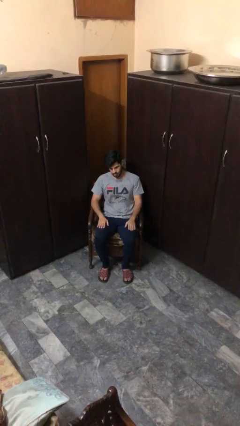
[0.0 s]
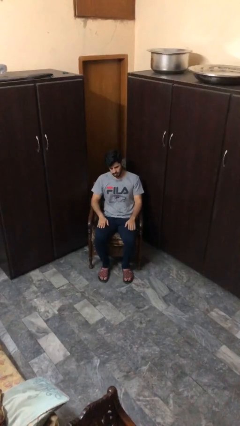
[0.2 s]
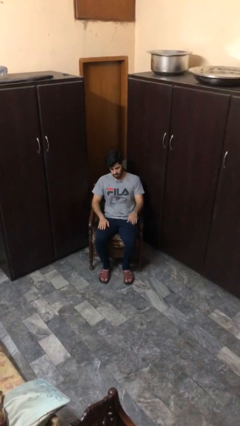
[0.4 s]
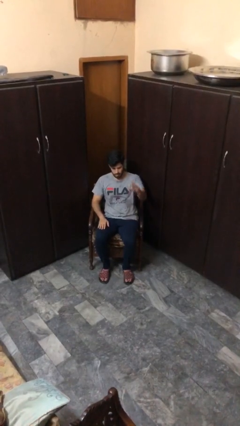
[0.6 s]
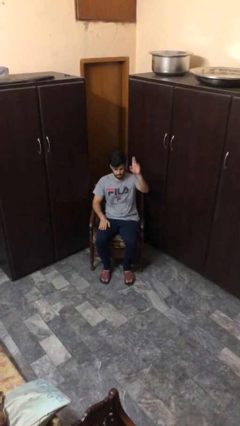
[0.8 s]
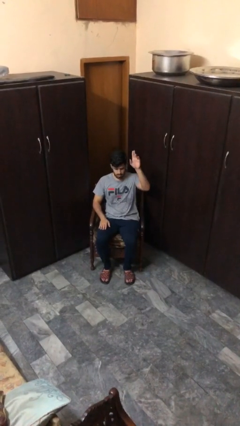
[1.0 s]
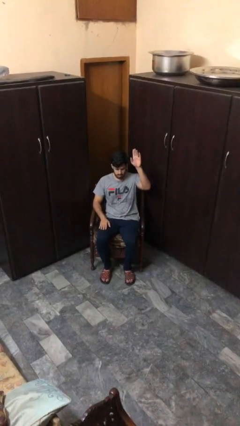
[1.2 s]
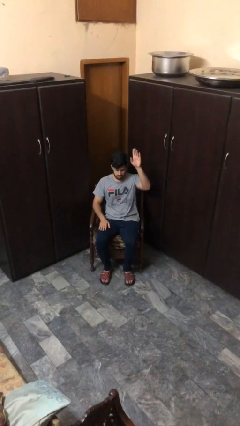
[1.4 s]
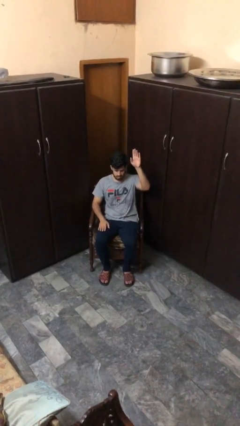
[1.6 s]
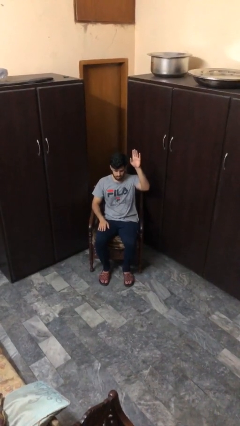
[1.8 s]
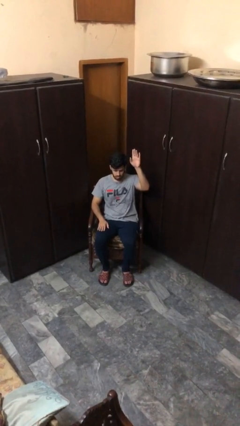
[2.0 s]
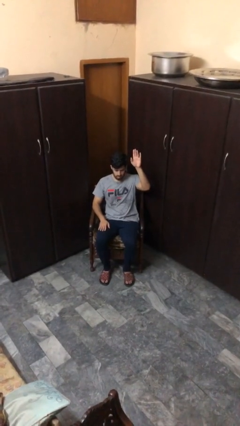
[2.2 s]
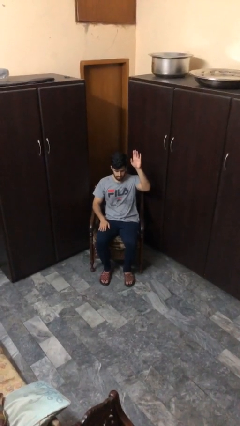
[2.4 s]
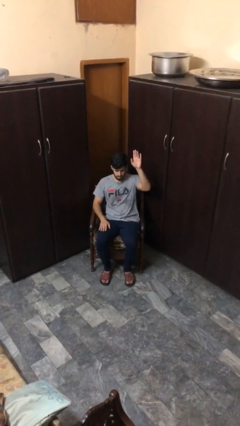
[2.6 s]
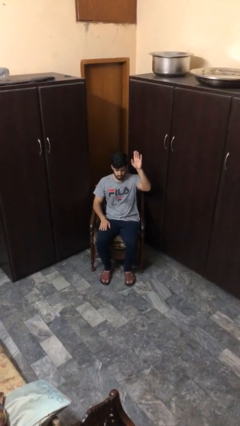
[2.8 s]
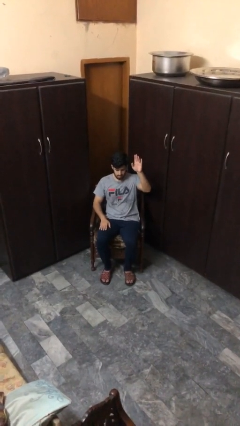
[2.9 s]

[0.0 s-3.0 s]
person gestures raise hand

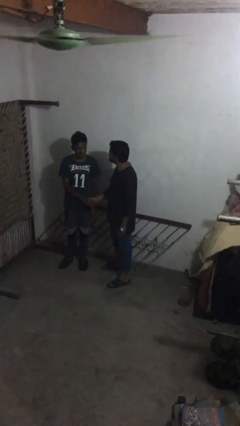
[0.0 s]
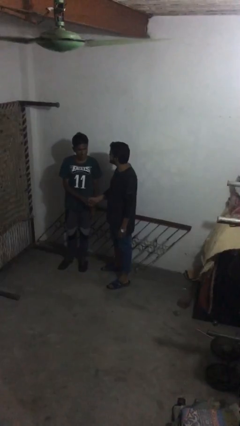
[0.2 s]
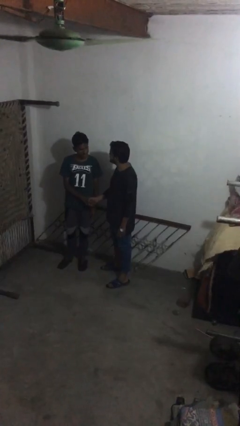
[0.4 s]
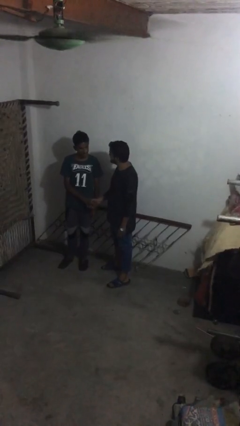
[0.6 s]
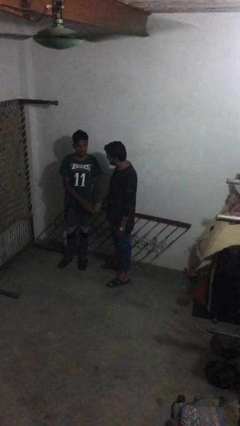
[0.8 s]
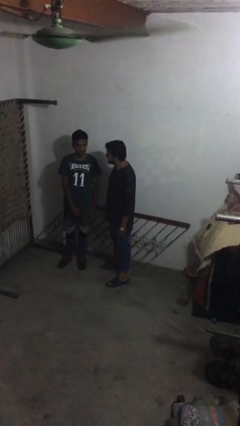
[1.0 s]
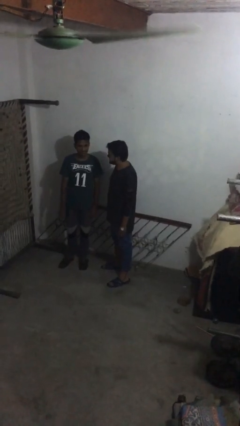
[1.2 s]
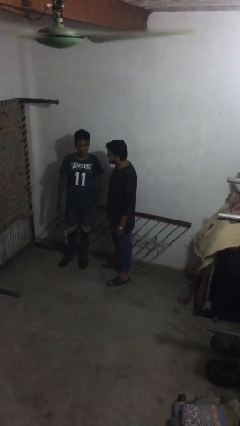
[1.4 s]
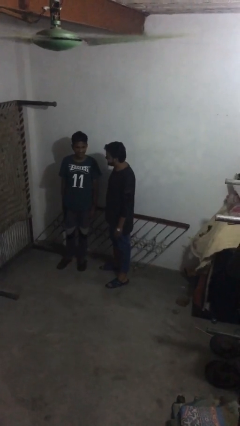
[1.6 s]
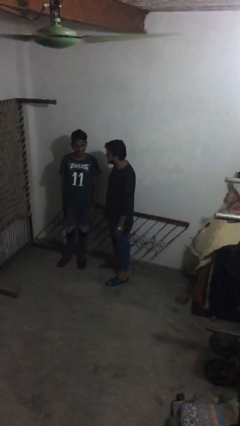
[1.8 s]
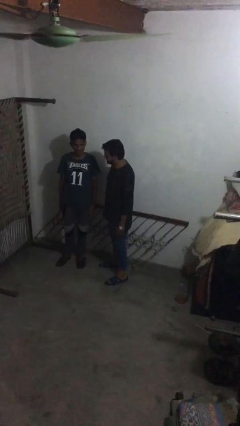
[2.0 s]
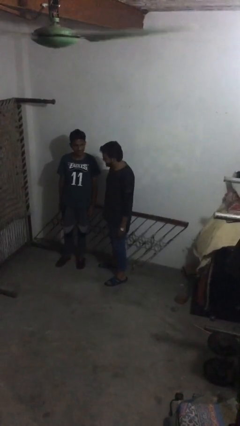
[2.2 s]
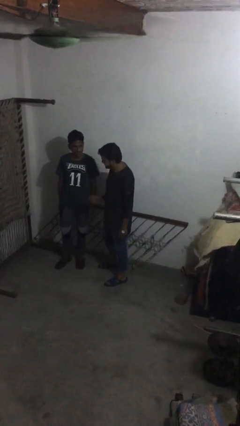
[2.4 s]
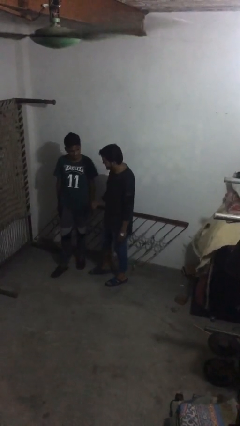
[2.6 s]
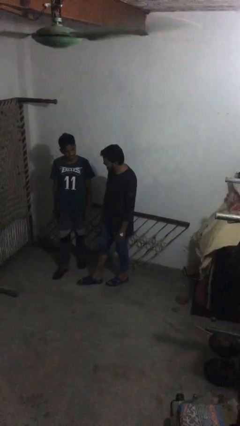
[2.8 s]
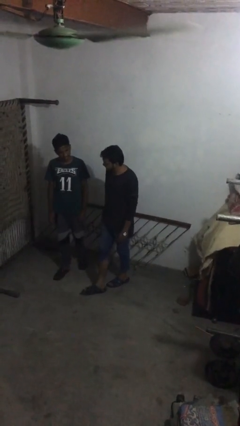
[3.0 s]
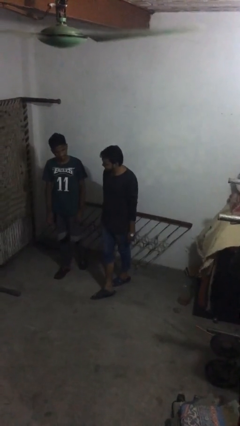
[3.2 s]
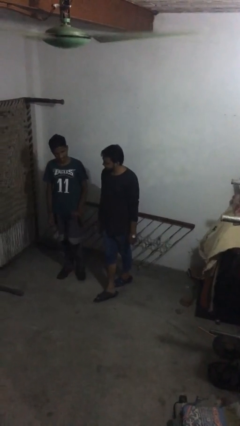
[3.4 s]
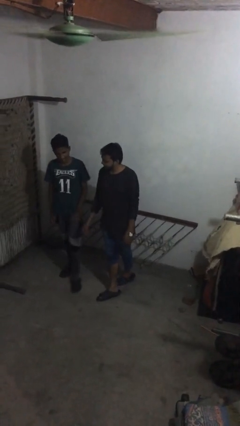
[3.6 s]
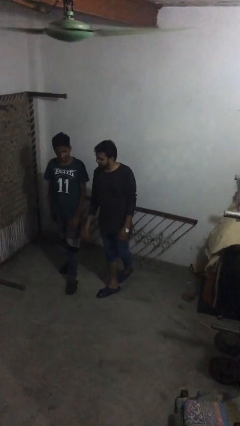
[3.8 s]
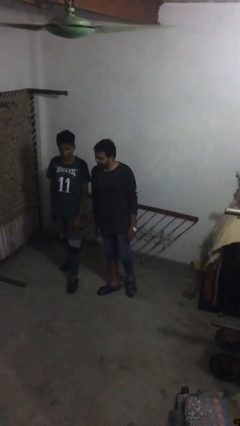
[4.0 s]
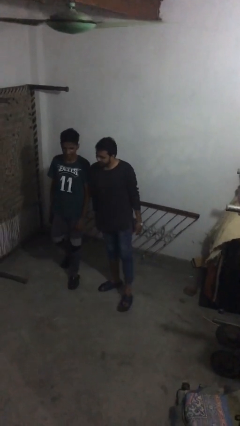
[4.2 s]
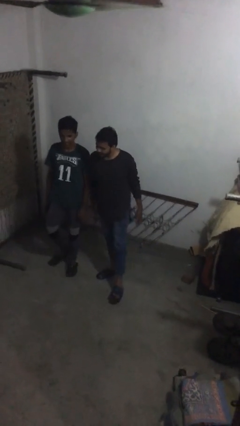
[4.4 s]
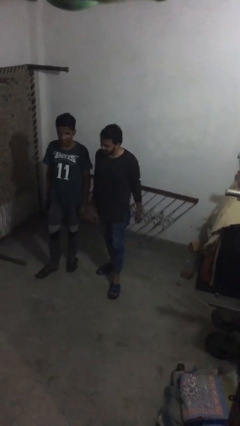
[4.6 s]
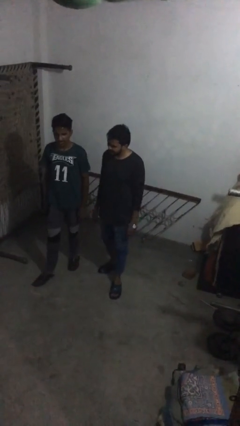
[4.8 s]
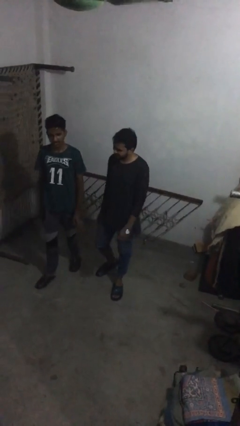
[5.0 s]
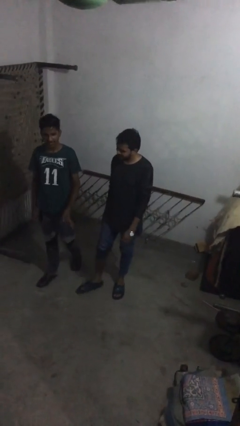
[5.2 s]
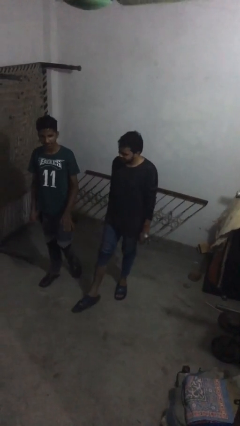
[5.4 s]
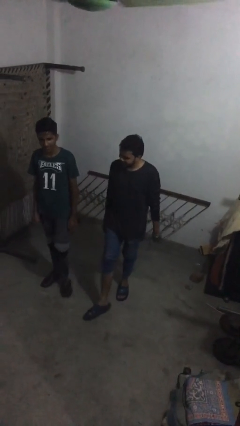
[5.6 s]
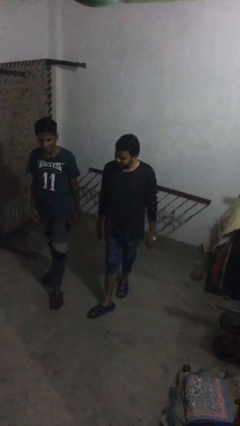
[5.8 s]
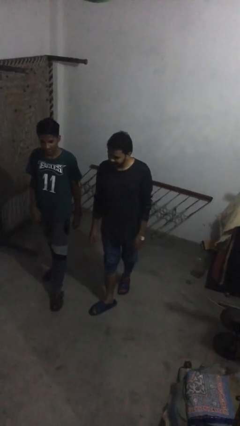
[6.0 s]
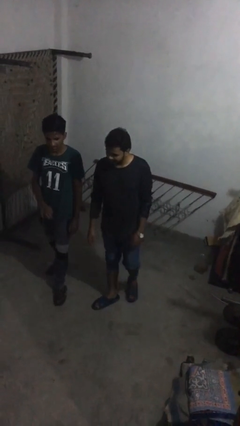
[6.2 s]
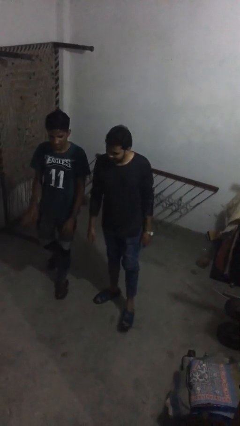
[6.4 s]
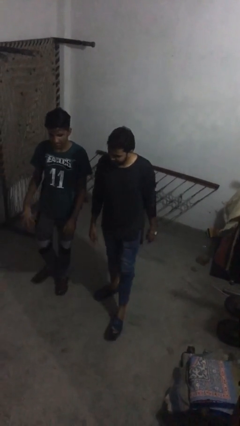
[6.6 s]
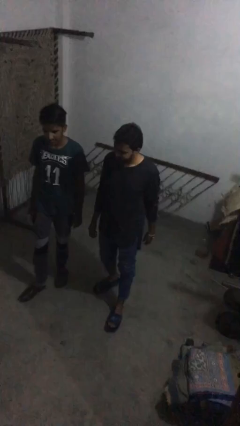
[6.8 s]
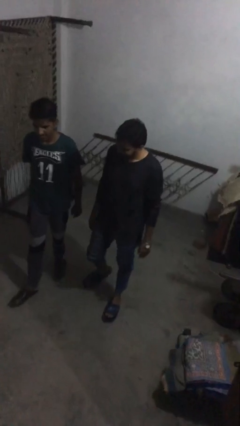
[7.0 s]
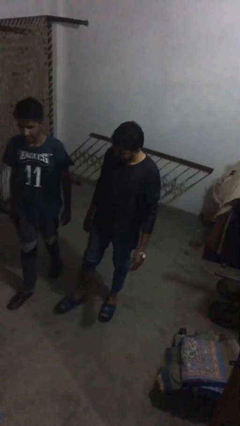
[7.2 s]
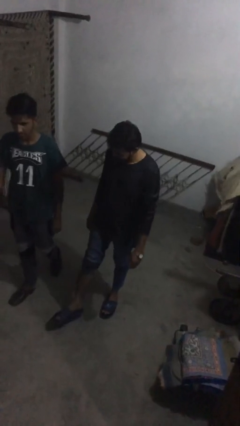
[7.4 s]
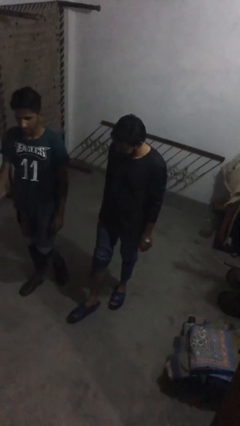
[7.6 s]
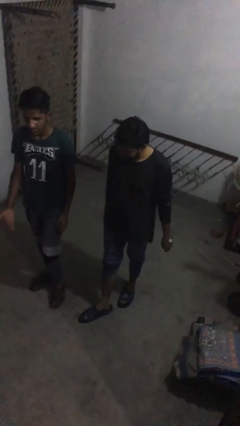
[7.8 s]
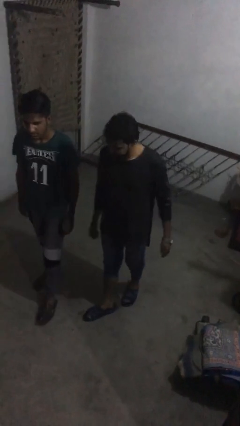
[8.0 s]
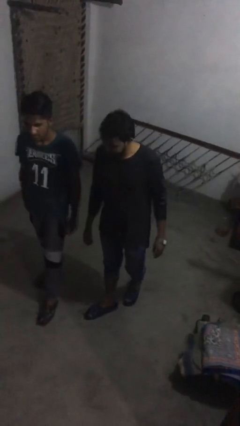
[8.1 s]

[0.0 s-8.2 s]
person talks to person

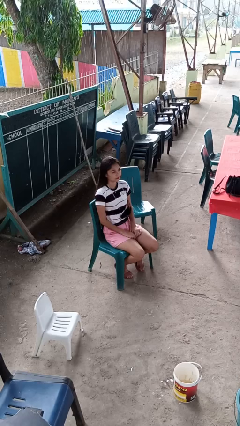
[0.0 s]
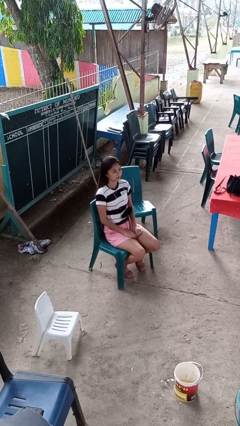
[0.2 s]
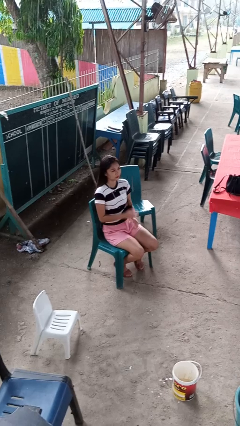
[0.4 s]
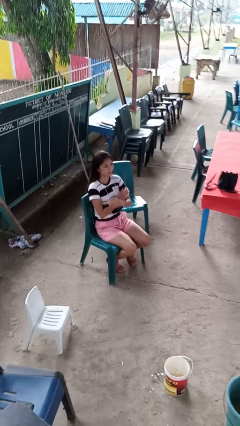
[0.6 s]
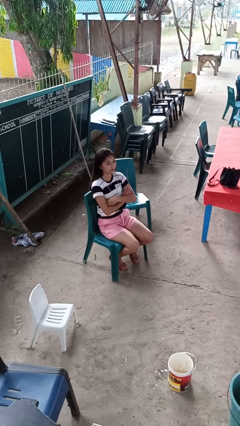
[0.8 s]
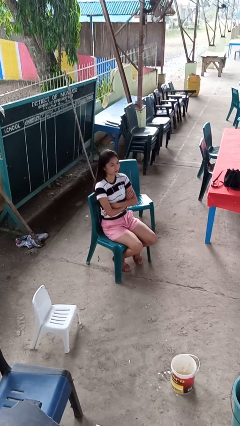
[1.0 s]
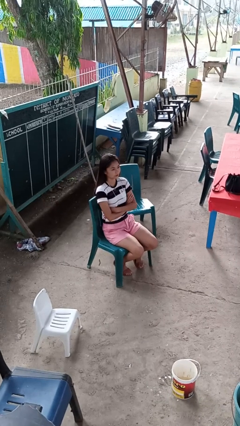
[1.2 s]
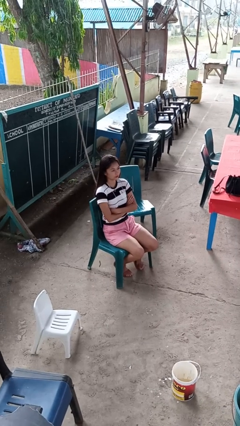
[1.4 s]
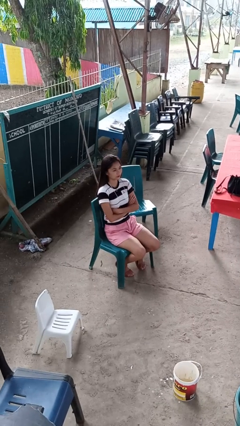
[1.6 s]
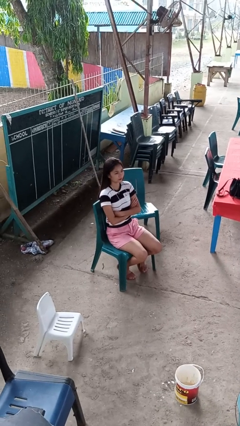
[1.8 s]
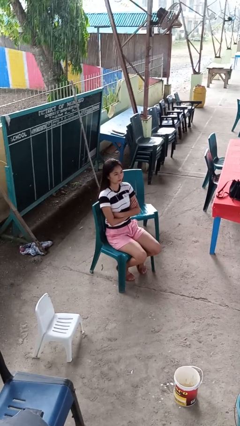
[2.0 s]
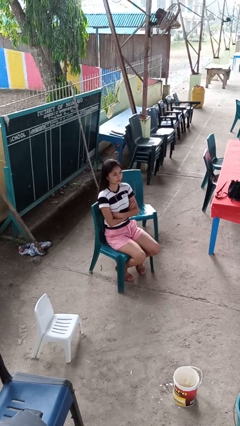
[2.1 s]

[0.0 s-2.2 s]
person gestures arms x

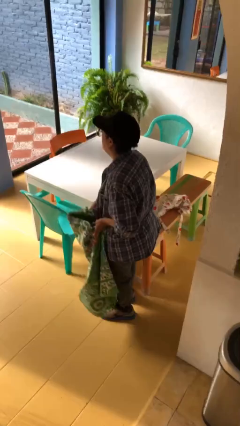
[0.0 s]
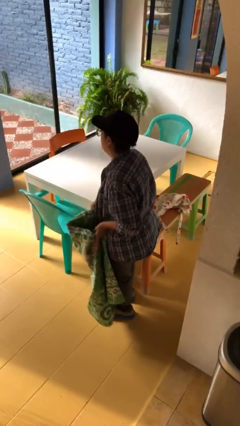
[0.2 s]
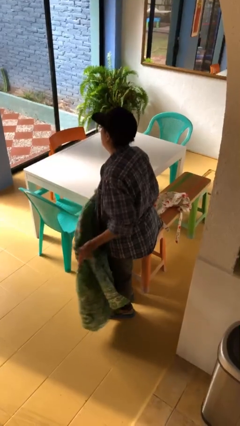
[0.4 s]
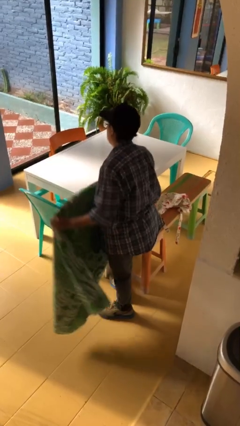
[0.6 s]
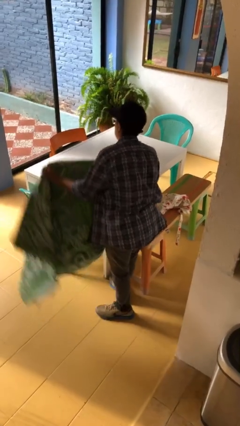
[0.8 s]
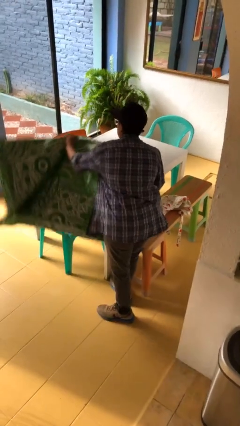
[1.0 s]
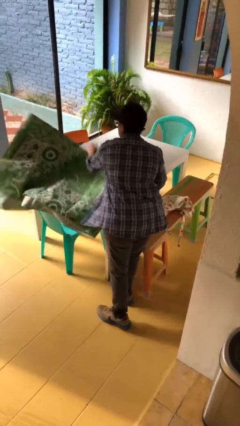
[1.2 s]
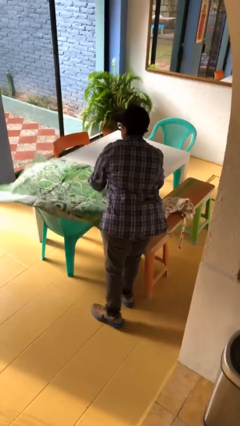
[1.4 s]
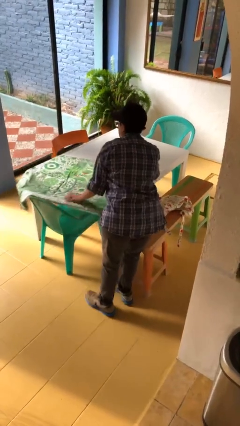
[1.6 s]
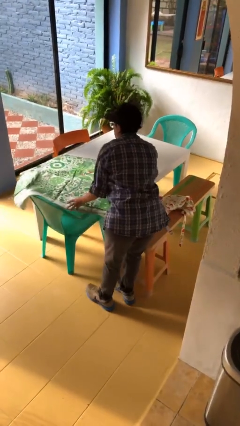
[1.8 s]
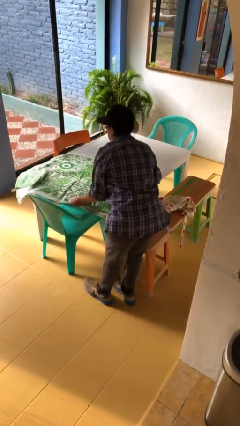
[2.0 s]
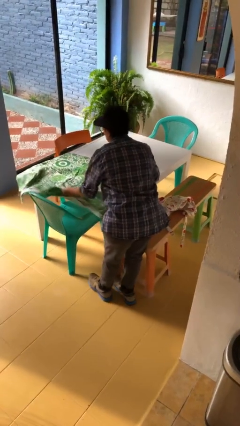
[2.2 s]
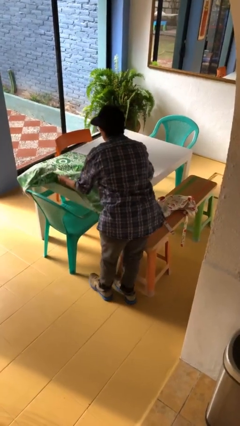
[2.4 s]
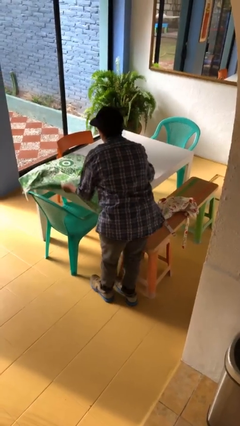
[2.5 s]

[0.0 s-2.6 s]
person spreads tablecloth

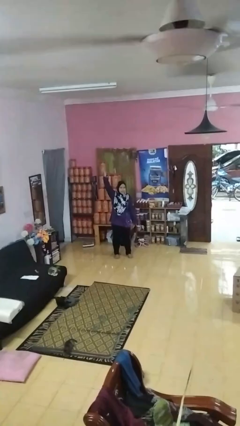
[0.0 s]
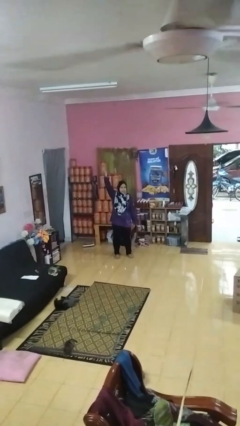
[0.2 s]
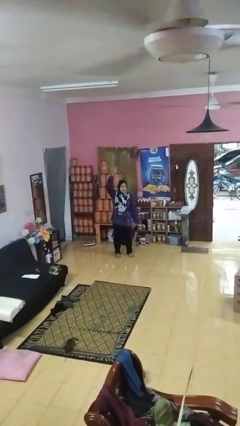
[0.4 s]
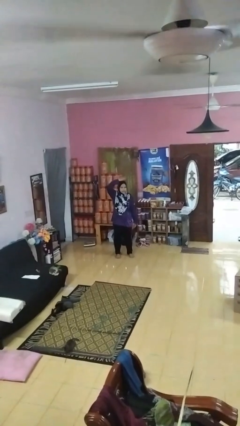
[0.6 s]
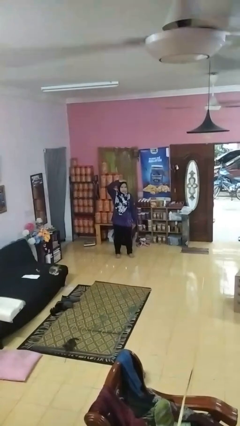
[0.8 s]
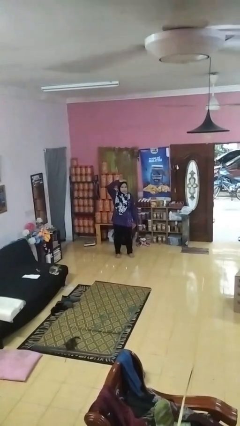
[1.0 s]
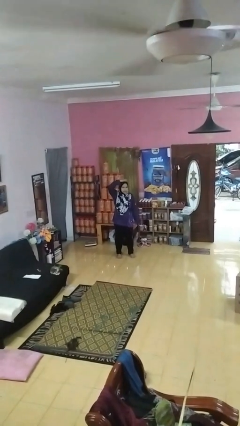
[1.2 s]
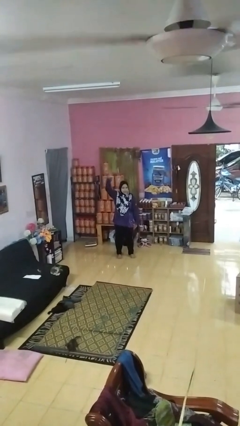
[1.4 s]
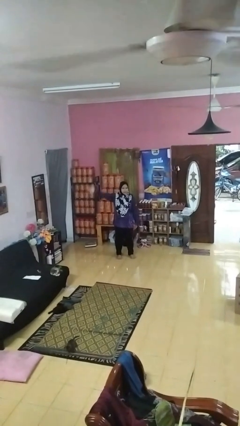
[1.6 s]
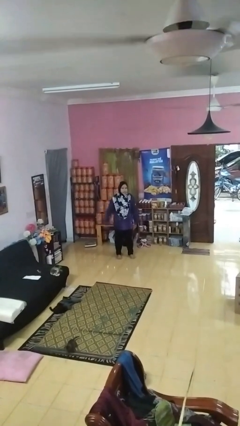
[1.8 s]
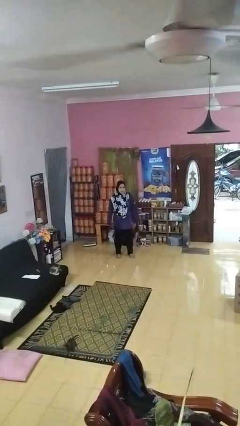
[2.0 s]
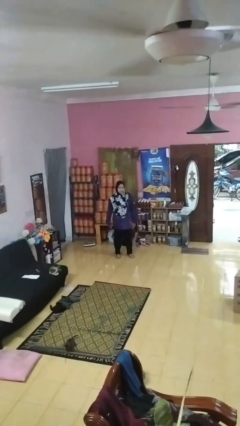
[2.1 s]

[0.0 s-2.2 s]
person pats head
